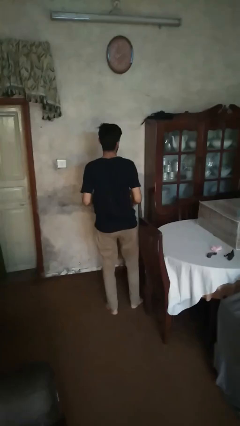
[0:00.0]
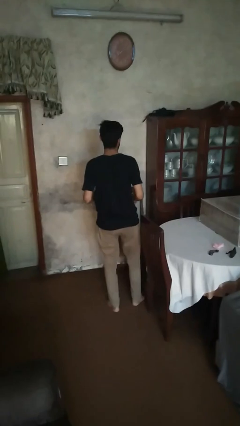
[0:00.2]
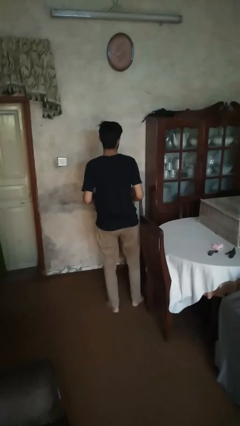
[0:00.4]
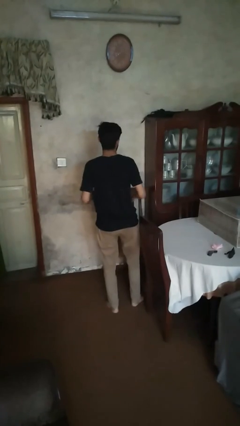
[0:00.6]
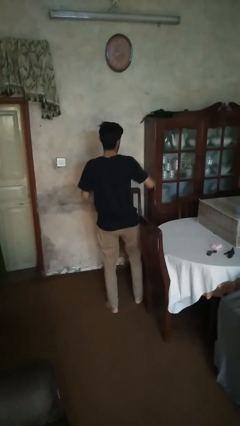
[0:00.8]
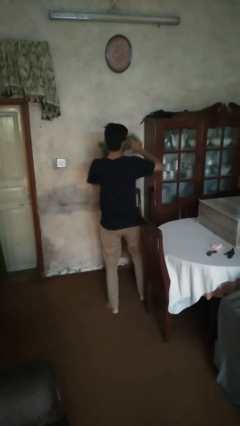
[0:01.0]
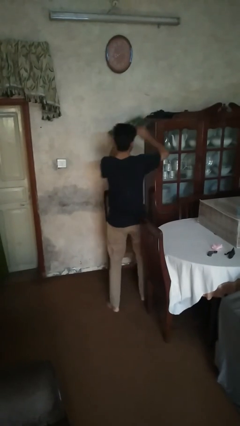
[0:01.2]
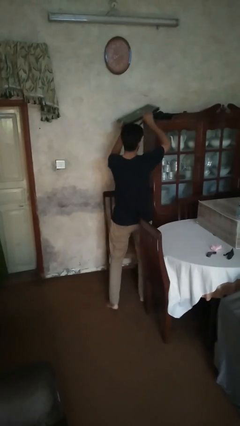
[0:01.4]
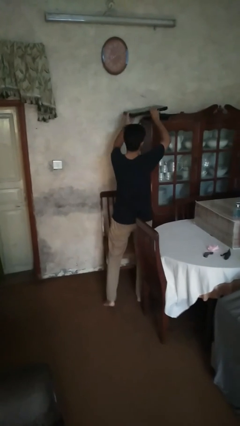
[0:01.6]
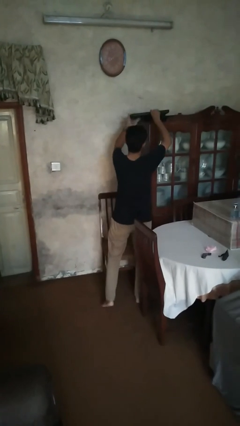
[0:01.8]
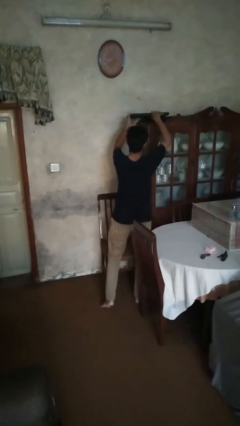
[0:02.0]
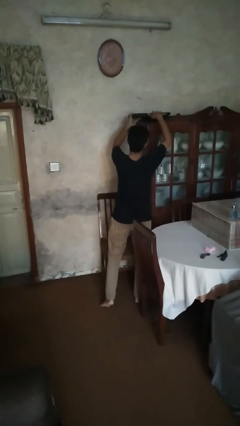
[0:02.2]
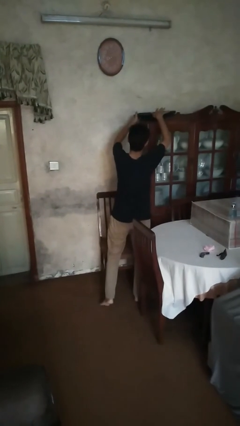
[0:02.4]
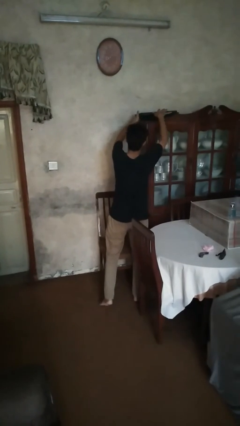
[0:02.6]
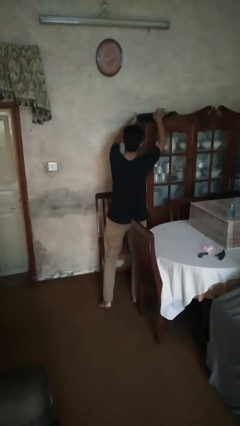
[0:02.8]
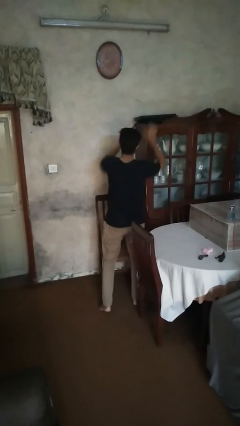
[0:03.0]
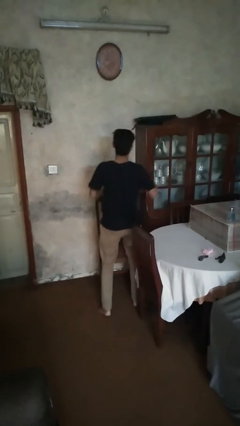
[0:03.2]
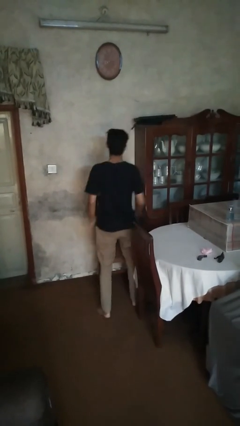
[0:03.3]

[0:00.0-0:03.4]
person puts down object into cabinet

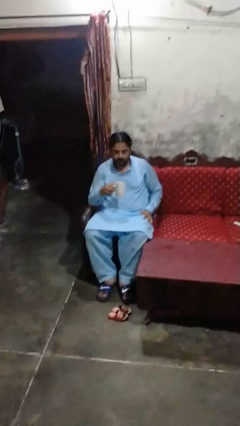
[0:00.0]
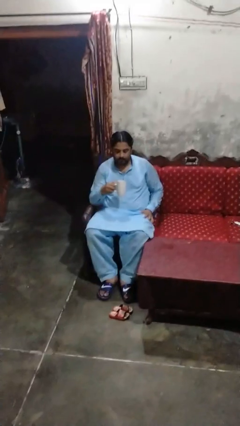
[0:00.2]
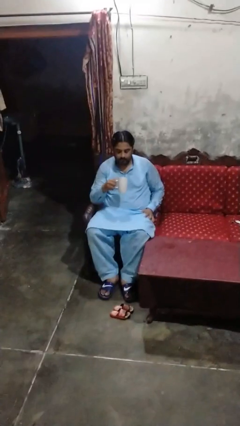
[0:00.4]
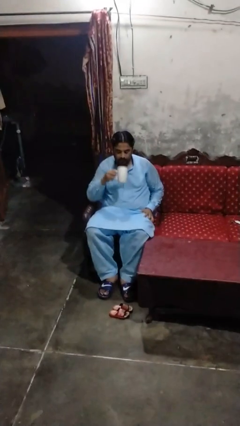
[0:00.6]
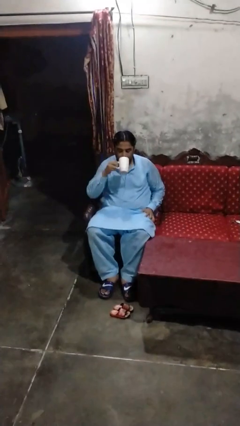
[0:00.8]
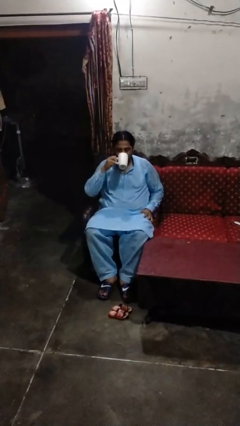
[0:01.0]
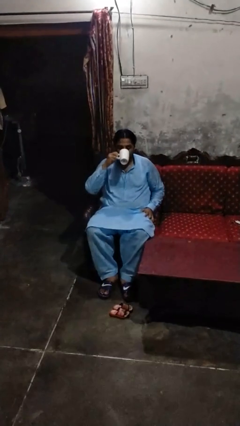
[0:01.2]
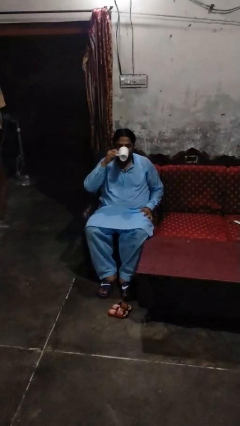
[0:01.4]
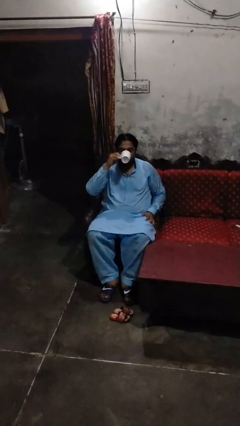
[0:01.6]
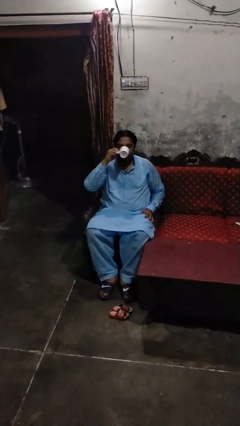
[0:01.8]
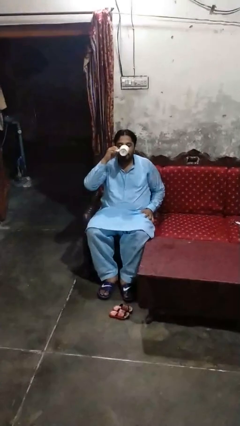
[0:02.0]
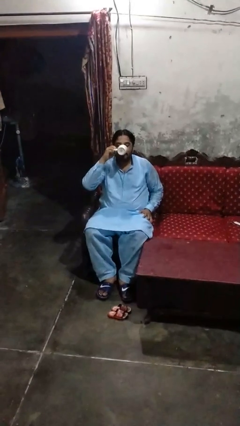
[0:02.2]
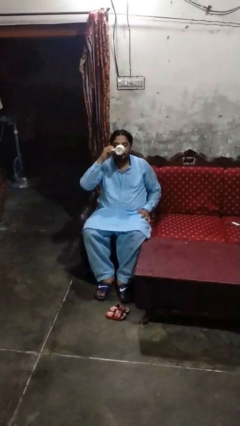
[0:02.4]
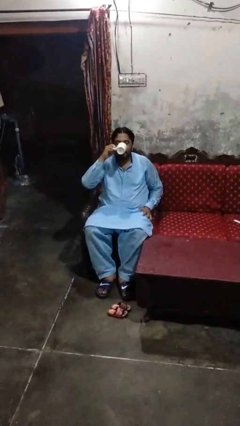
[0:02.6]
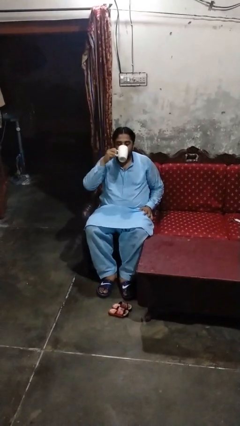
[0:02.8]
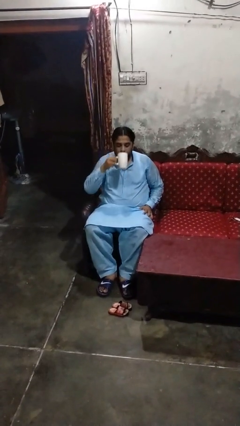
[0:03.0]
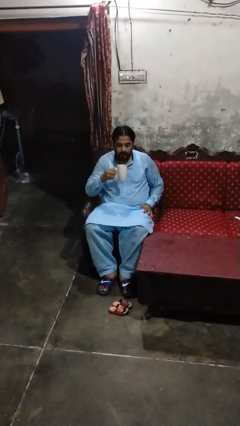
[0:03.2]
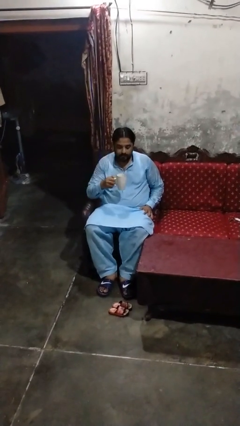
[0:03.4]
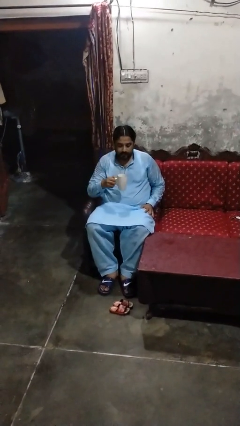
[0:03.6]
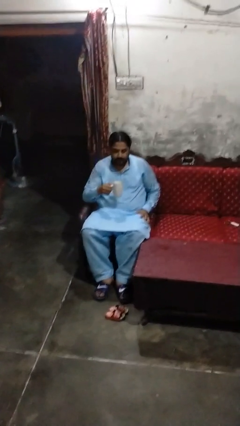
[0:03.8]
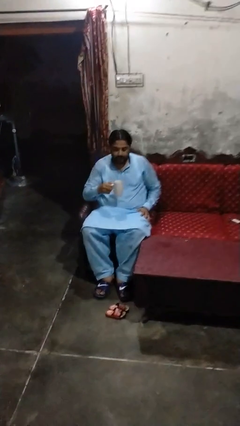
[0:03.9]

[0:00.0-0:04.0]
person drinks from mug

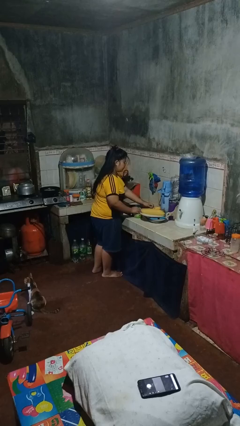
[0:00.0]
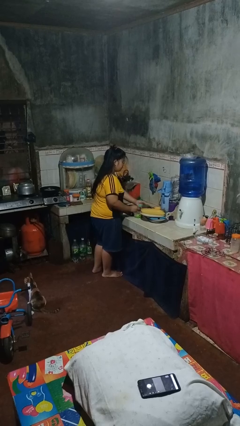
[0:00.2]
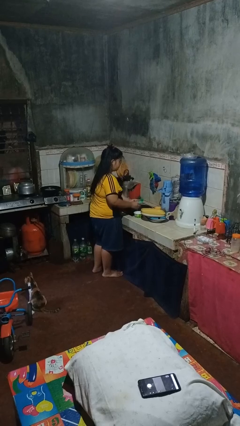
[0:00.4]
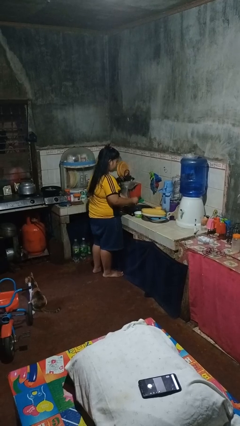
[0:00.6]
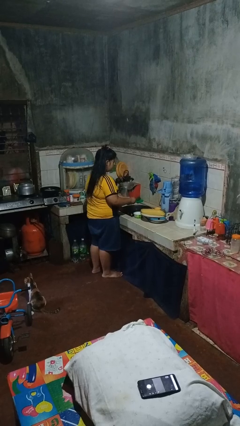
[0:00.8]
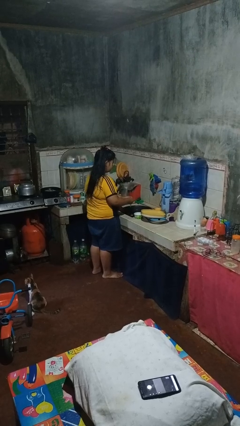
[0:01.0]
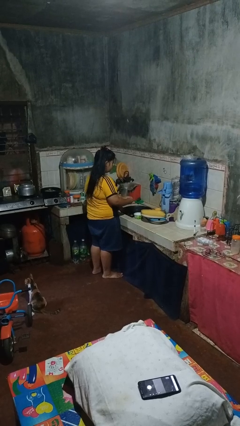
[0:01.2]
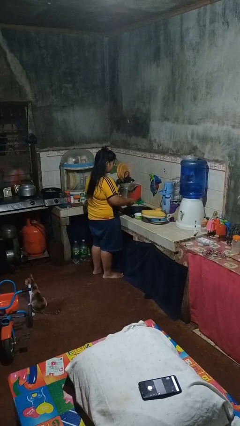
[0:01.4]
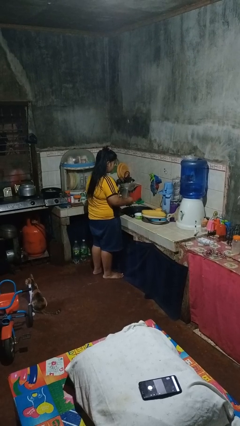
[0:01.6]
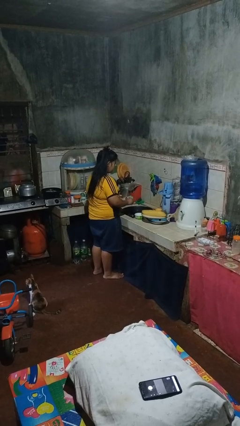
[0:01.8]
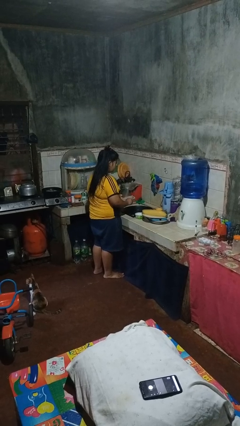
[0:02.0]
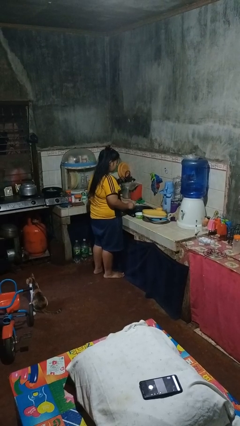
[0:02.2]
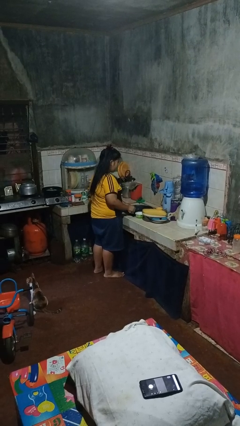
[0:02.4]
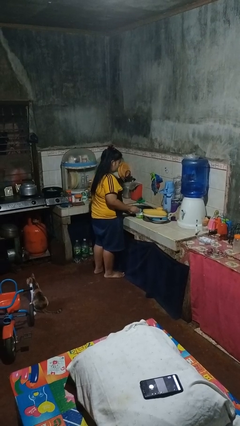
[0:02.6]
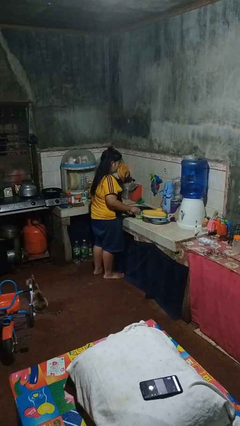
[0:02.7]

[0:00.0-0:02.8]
person washes dish

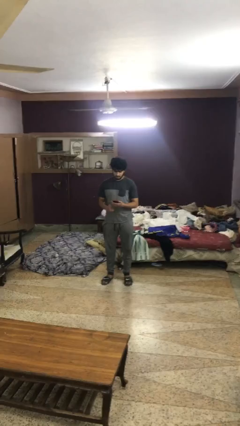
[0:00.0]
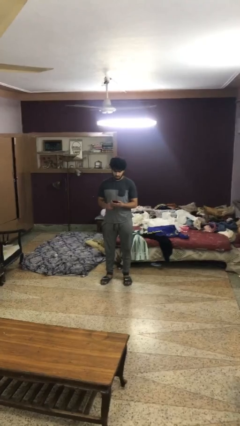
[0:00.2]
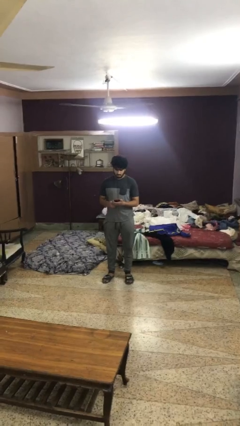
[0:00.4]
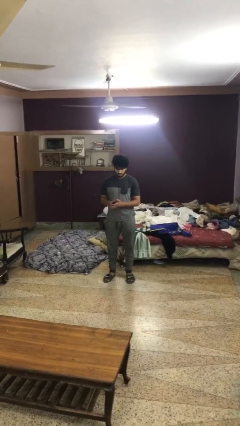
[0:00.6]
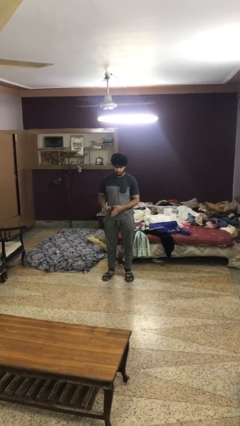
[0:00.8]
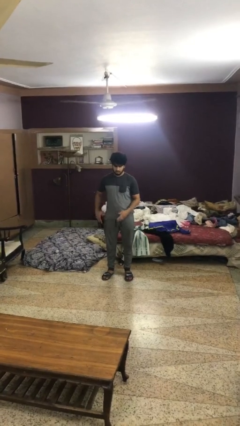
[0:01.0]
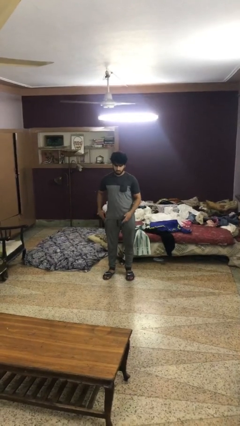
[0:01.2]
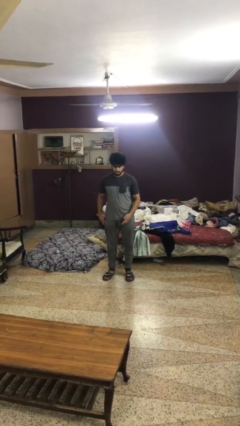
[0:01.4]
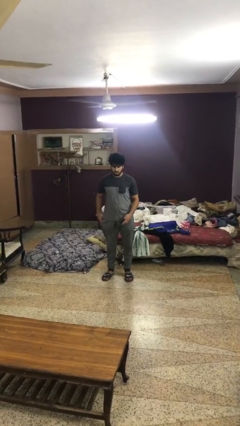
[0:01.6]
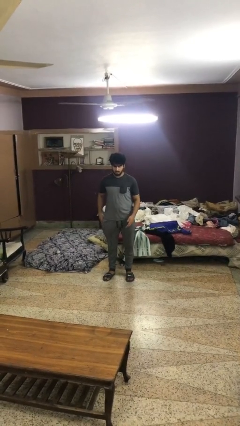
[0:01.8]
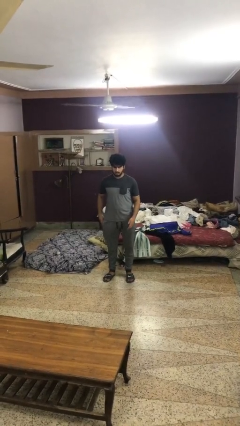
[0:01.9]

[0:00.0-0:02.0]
person puts phone into pocket

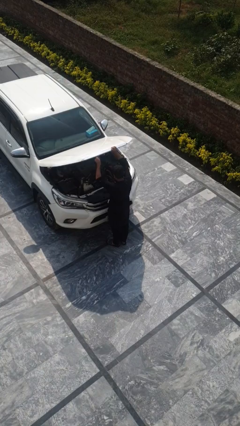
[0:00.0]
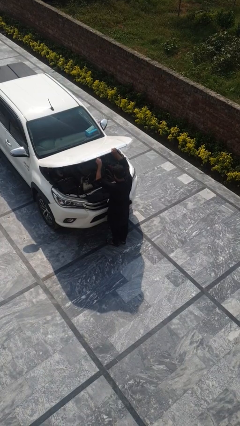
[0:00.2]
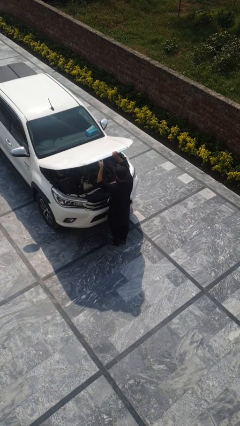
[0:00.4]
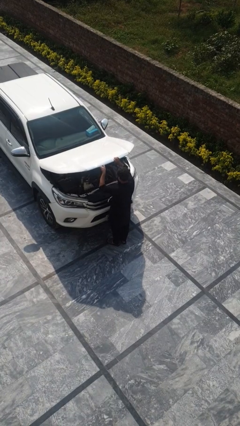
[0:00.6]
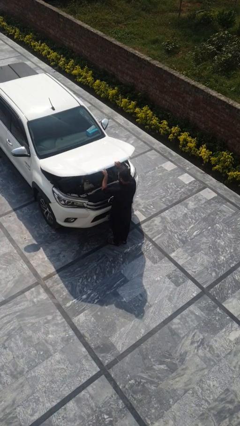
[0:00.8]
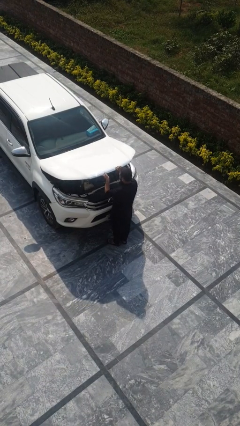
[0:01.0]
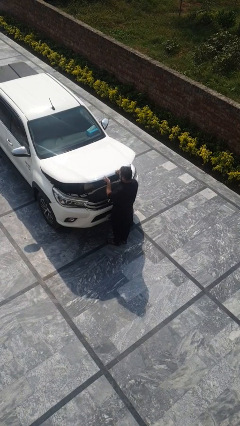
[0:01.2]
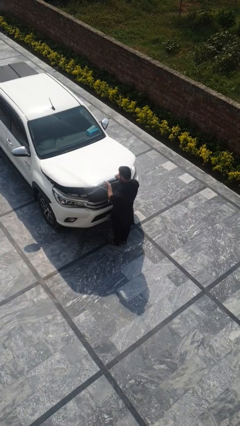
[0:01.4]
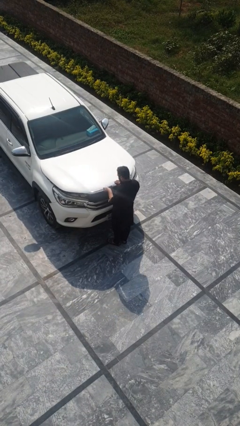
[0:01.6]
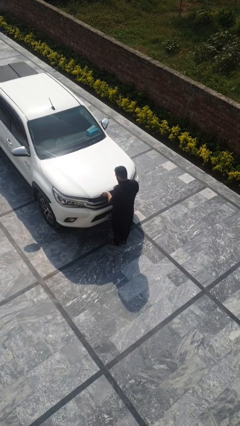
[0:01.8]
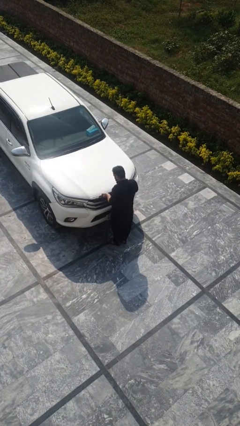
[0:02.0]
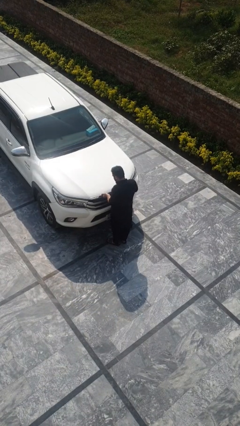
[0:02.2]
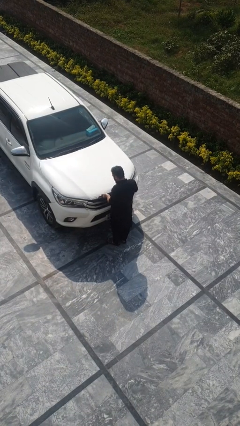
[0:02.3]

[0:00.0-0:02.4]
person closes car hood

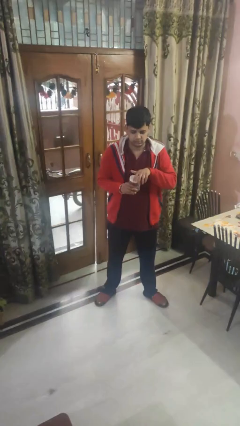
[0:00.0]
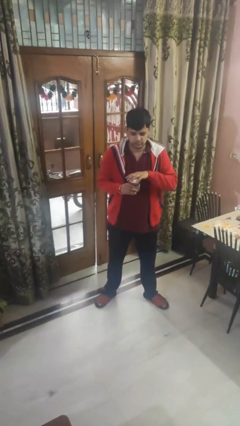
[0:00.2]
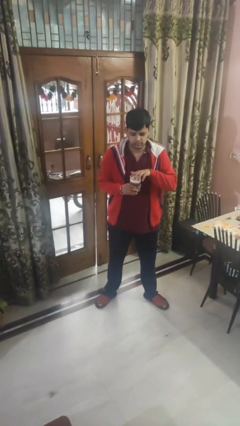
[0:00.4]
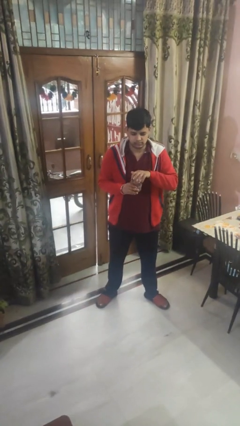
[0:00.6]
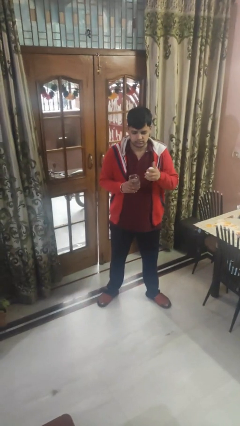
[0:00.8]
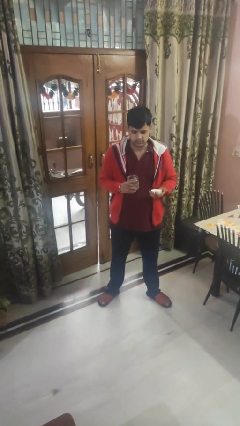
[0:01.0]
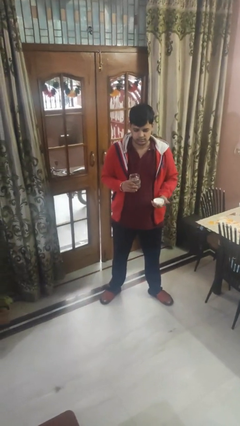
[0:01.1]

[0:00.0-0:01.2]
person opens jar

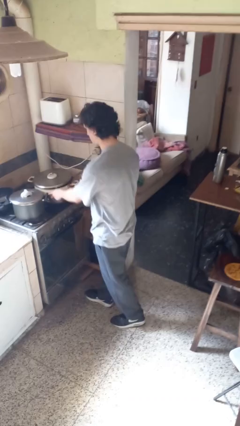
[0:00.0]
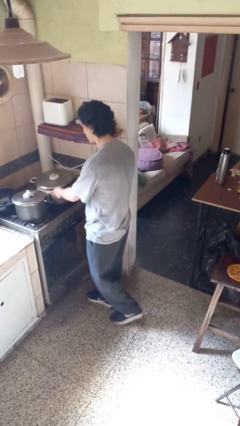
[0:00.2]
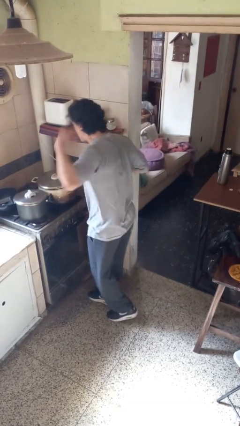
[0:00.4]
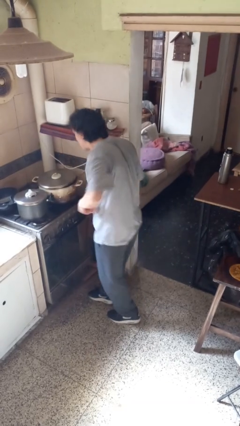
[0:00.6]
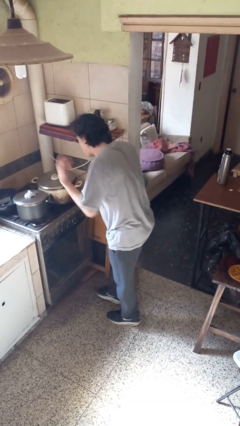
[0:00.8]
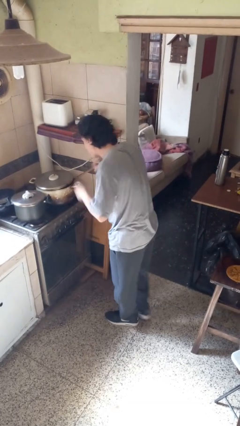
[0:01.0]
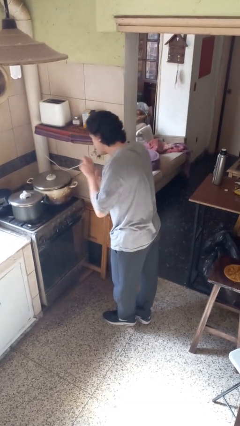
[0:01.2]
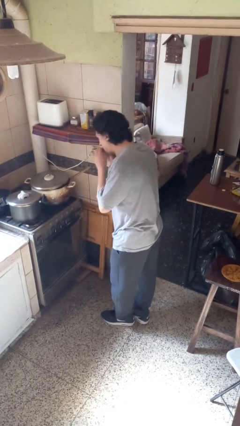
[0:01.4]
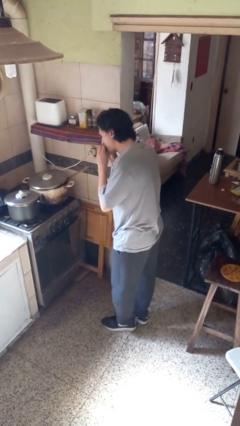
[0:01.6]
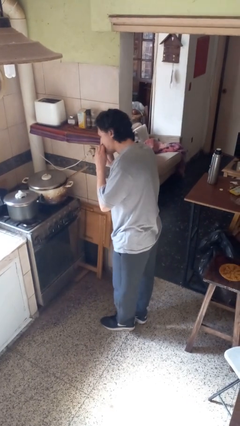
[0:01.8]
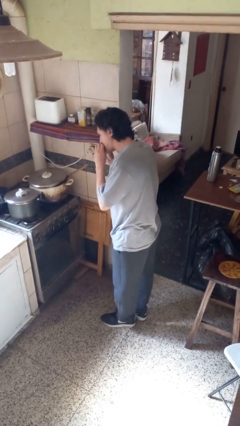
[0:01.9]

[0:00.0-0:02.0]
person burns hand
